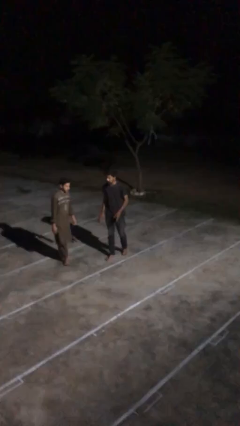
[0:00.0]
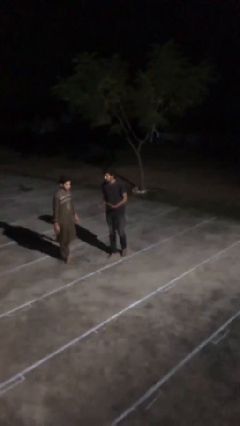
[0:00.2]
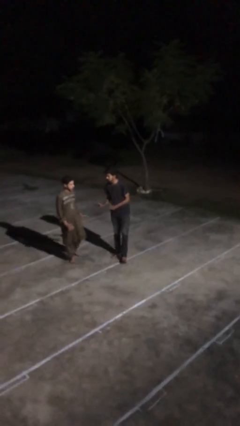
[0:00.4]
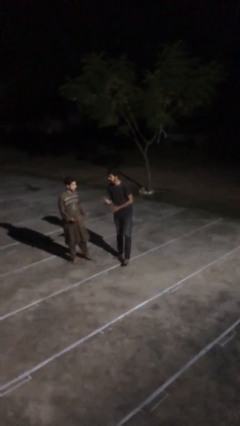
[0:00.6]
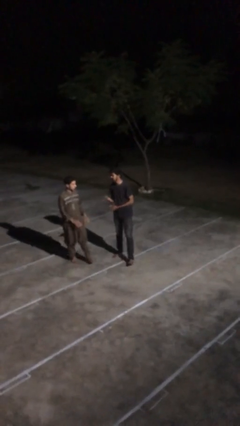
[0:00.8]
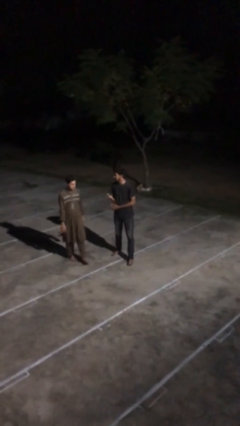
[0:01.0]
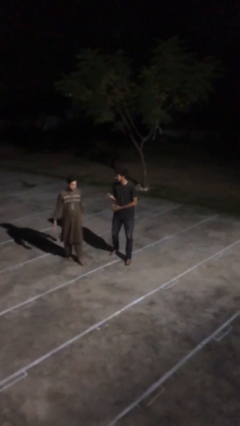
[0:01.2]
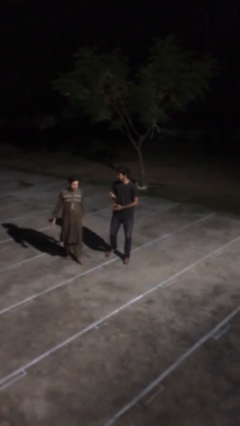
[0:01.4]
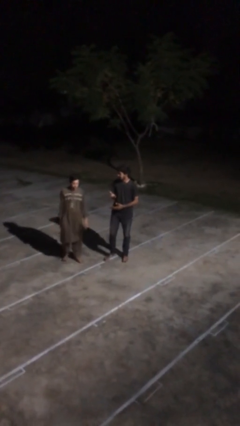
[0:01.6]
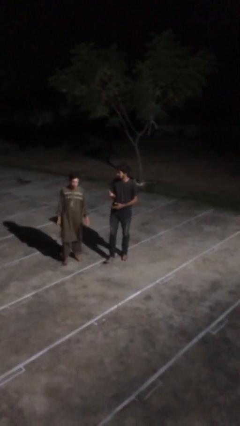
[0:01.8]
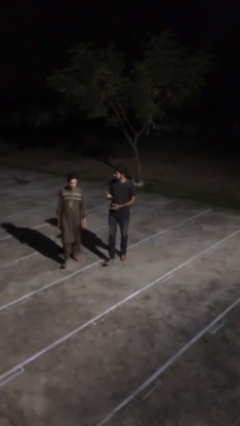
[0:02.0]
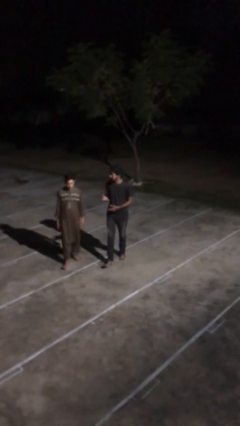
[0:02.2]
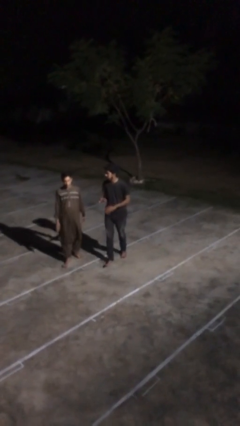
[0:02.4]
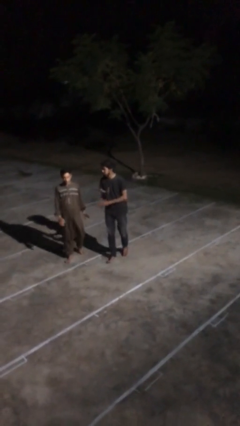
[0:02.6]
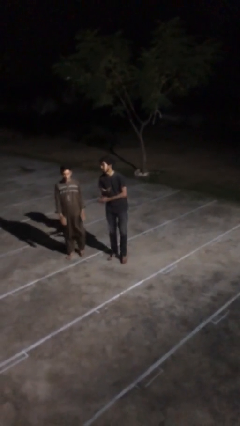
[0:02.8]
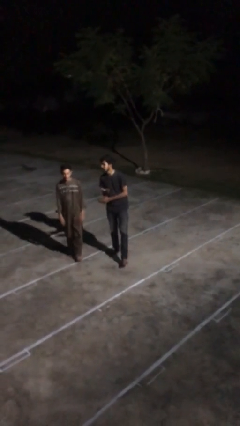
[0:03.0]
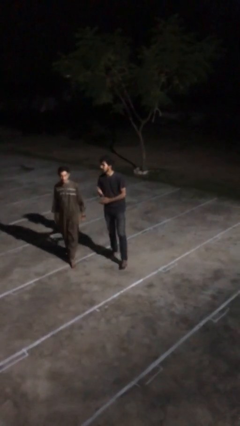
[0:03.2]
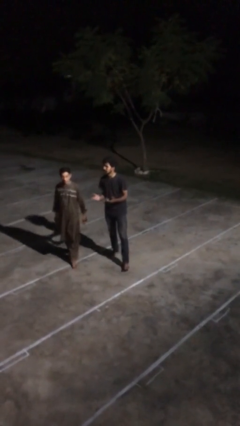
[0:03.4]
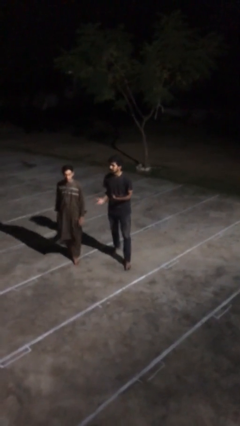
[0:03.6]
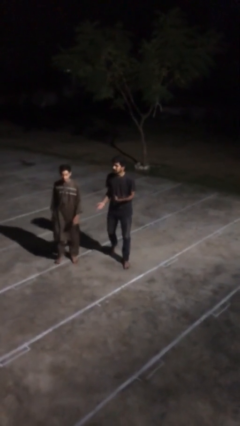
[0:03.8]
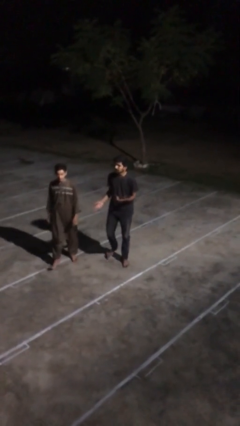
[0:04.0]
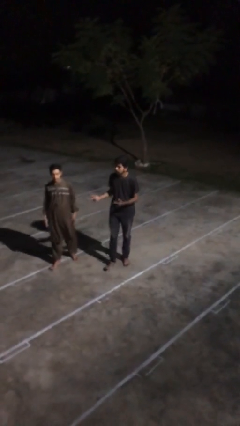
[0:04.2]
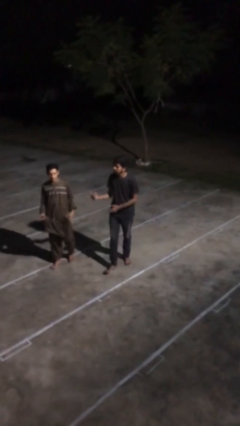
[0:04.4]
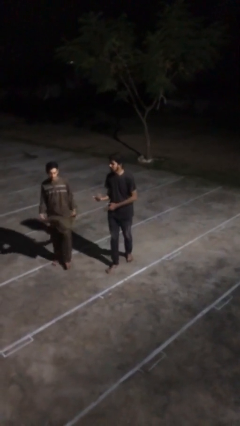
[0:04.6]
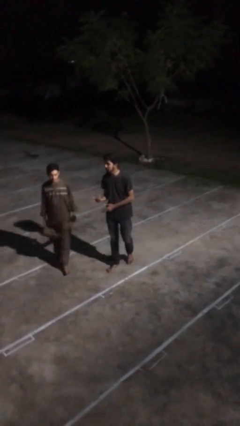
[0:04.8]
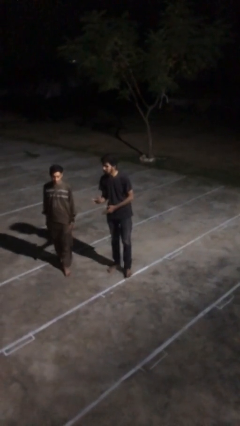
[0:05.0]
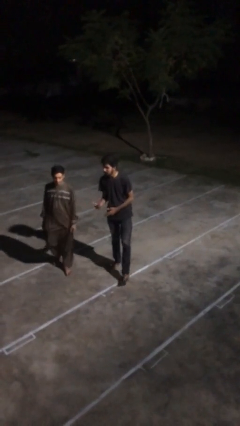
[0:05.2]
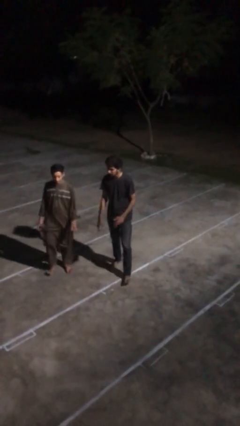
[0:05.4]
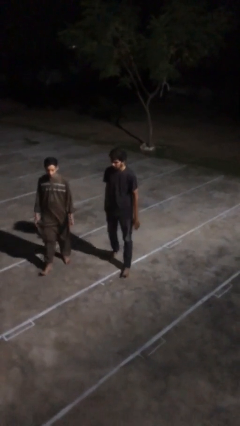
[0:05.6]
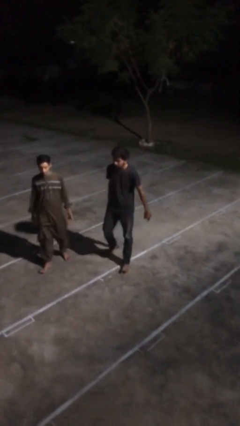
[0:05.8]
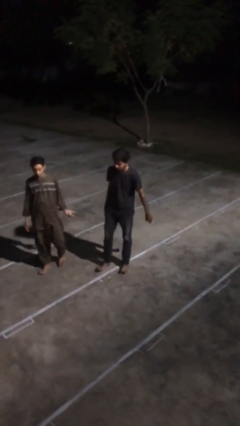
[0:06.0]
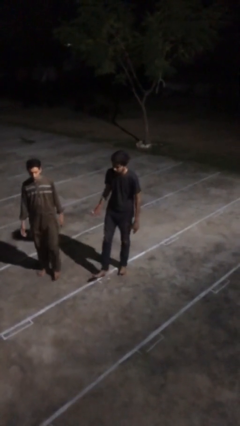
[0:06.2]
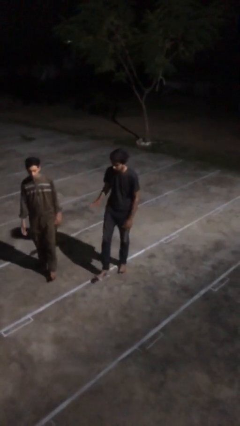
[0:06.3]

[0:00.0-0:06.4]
person talks to person

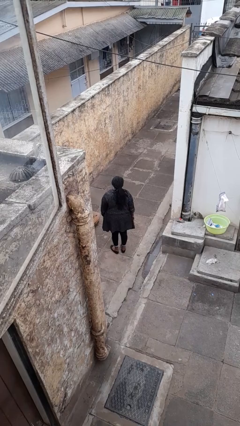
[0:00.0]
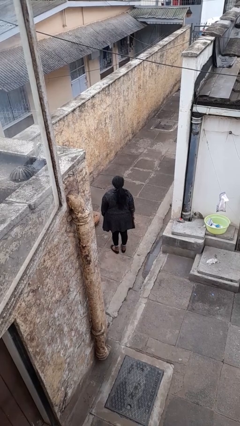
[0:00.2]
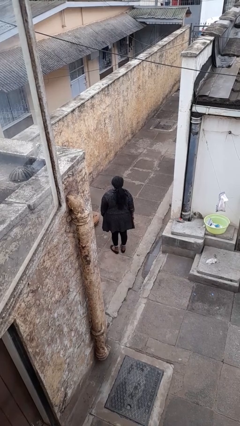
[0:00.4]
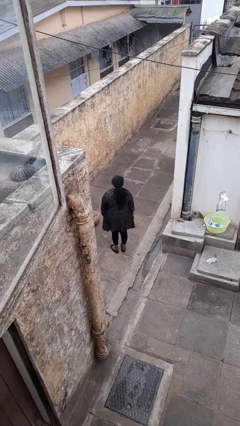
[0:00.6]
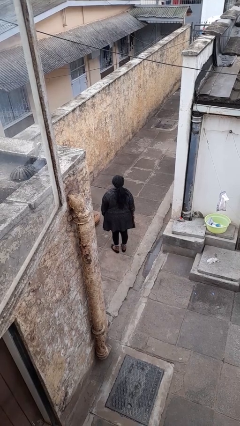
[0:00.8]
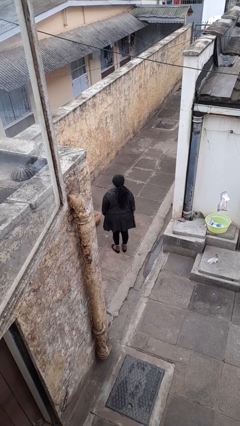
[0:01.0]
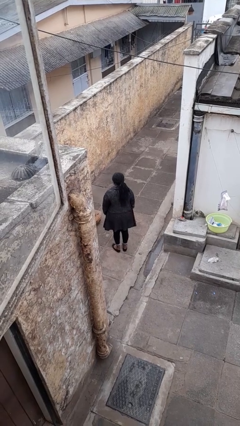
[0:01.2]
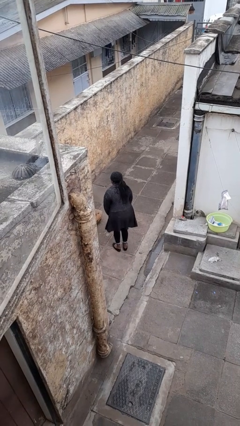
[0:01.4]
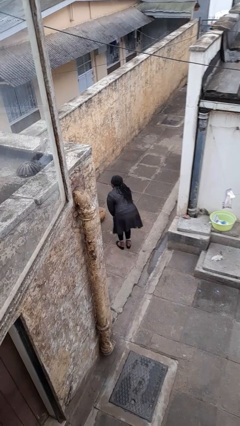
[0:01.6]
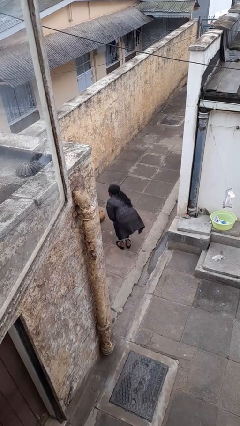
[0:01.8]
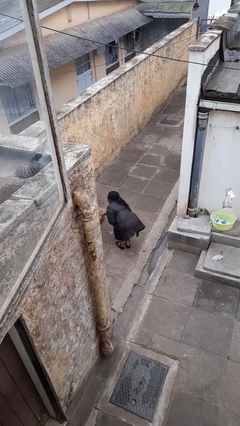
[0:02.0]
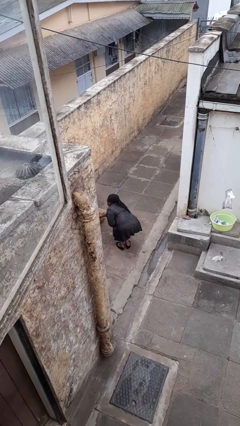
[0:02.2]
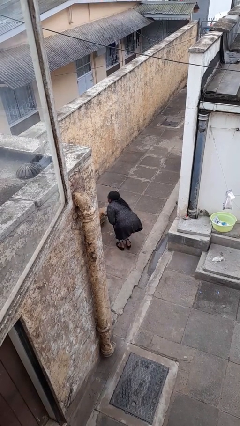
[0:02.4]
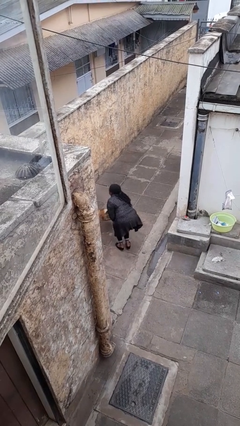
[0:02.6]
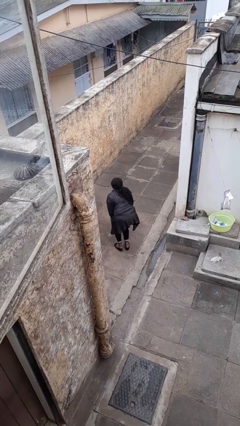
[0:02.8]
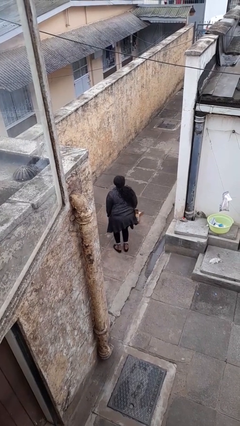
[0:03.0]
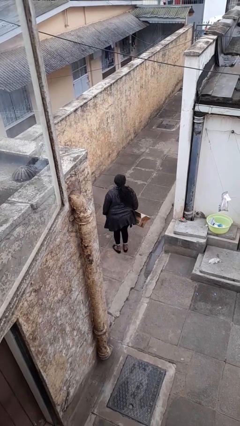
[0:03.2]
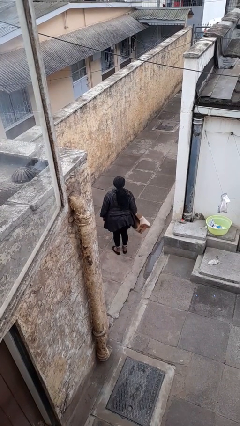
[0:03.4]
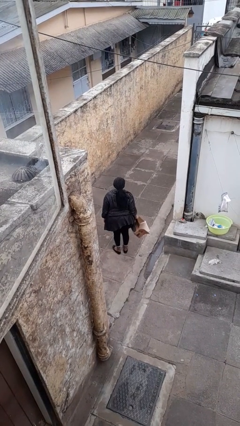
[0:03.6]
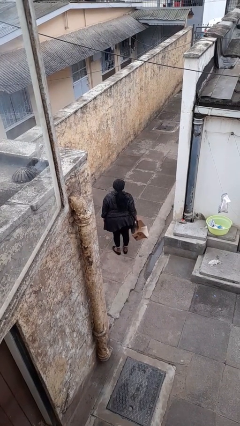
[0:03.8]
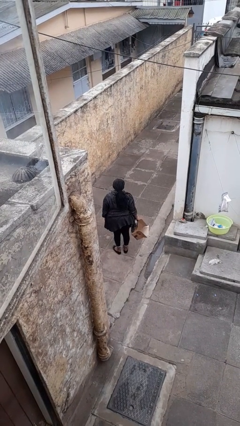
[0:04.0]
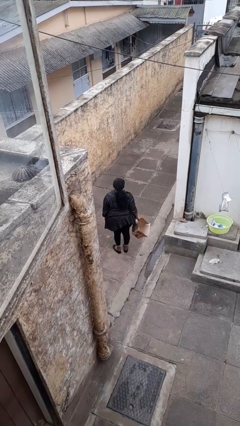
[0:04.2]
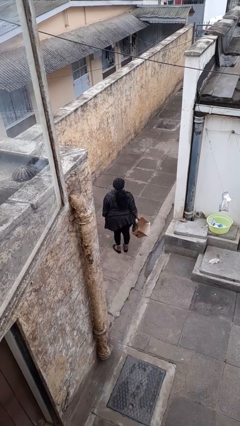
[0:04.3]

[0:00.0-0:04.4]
person picks up object from floor

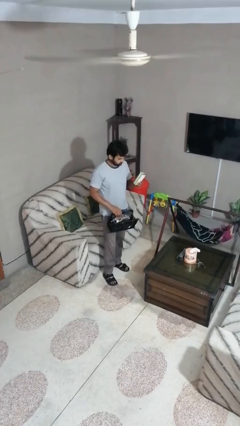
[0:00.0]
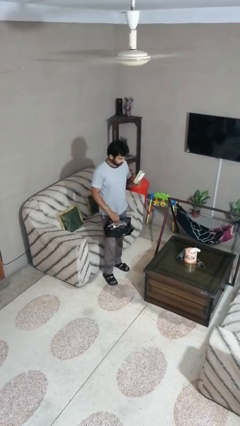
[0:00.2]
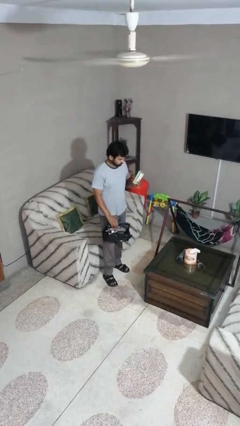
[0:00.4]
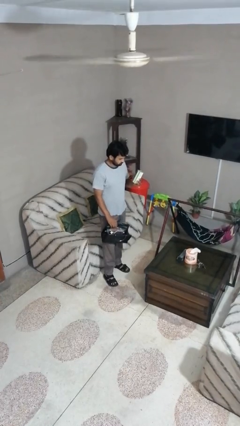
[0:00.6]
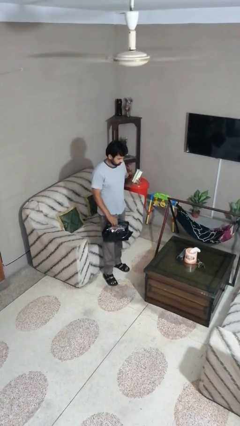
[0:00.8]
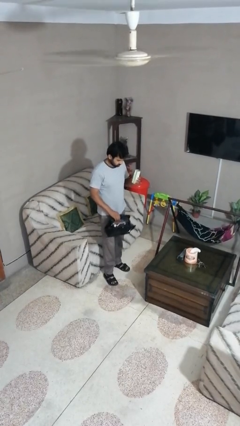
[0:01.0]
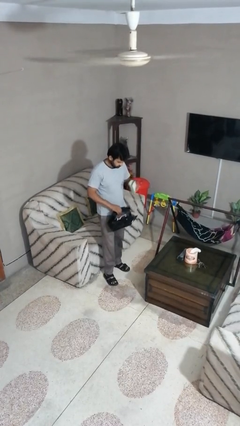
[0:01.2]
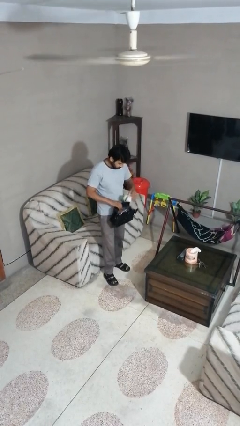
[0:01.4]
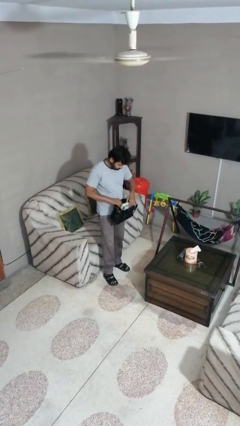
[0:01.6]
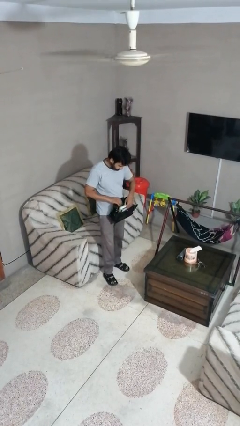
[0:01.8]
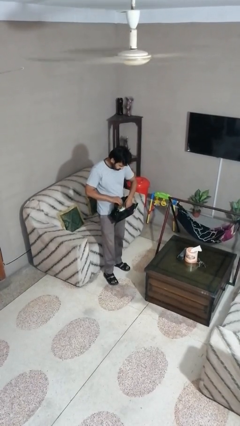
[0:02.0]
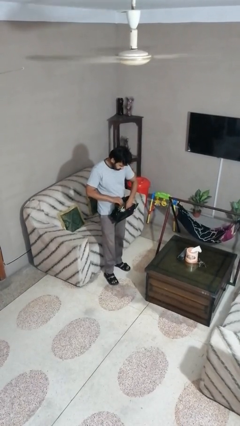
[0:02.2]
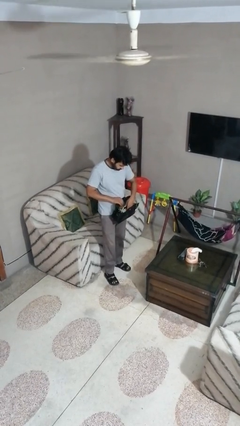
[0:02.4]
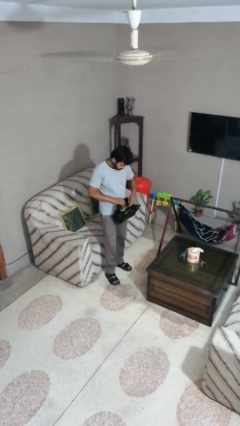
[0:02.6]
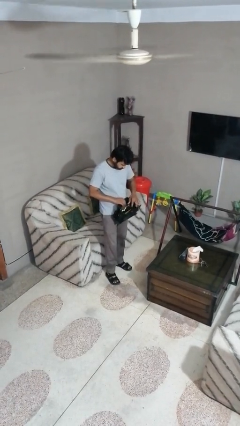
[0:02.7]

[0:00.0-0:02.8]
person puts object into purse

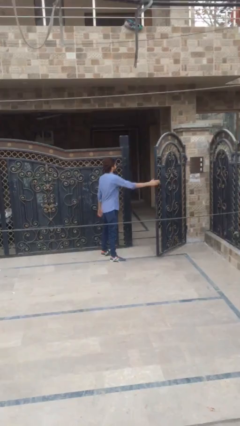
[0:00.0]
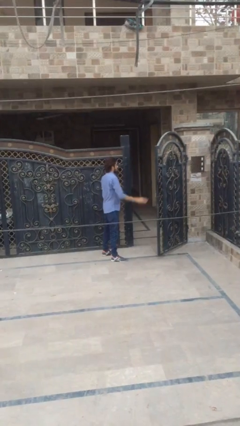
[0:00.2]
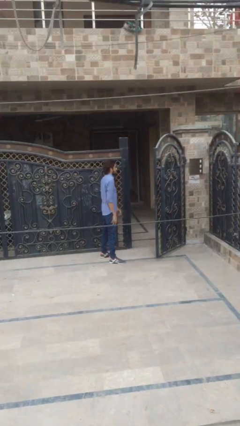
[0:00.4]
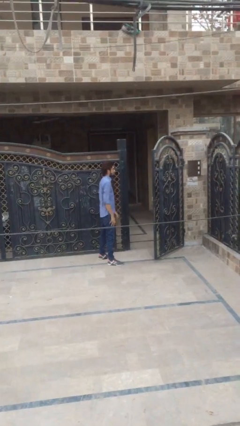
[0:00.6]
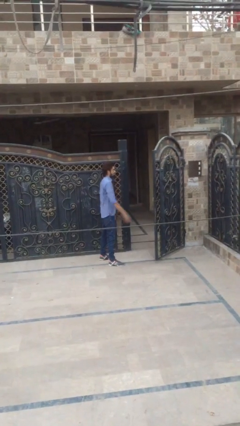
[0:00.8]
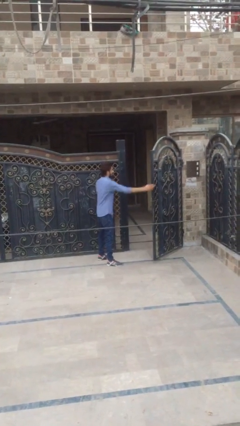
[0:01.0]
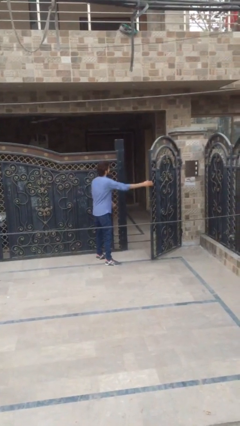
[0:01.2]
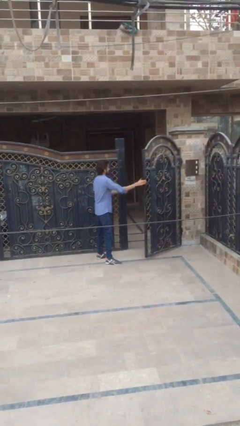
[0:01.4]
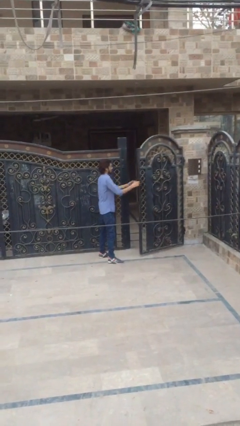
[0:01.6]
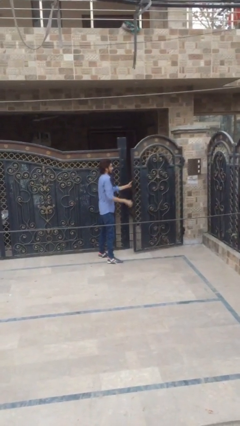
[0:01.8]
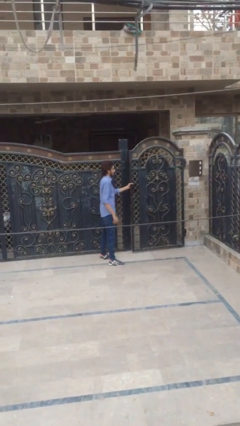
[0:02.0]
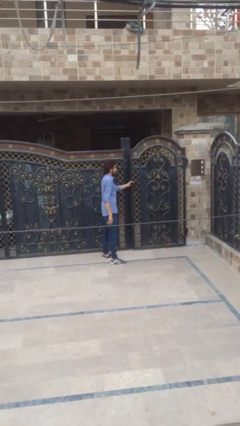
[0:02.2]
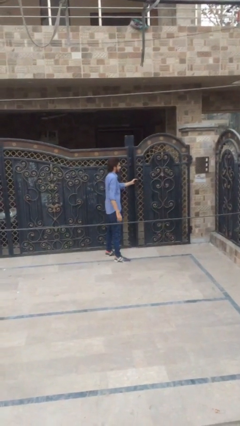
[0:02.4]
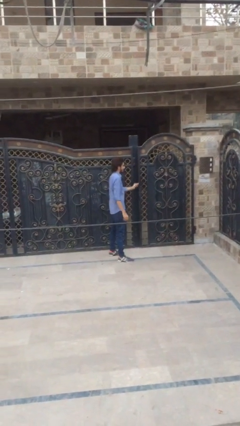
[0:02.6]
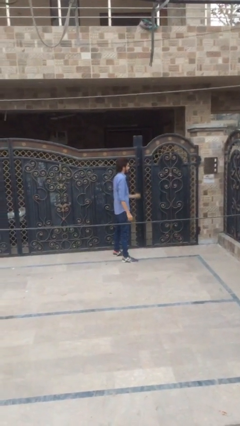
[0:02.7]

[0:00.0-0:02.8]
person closes facility door

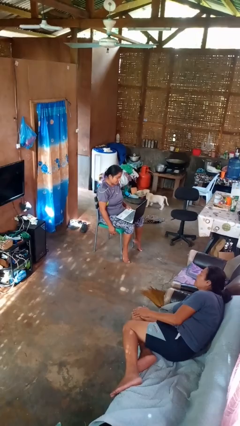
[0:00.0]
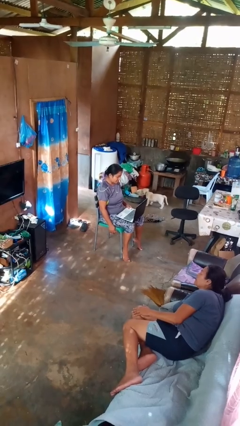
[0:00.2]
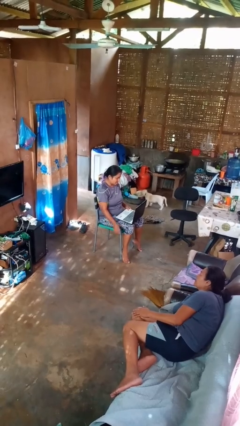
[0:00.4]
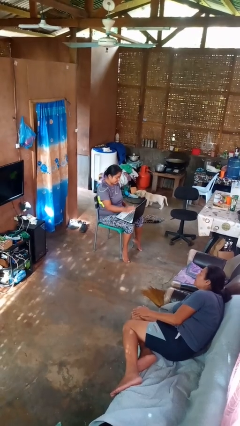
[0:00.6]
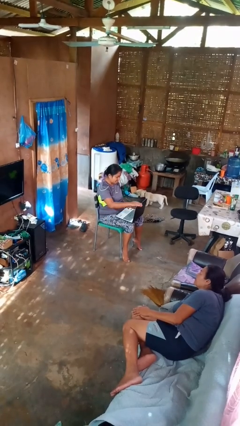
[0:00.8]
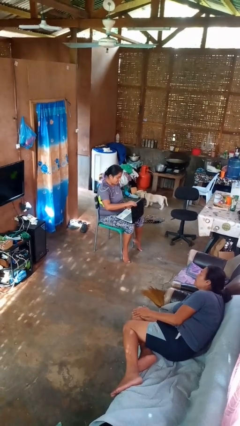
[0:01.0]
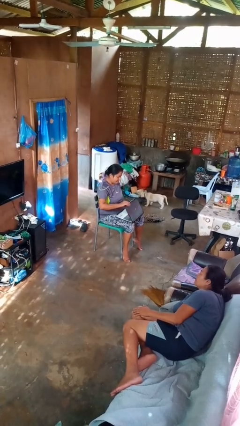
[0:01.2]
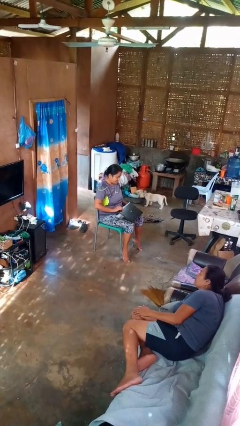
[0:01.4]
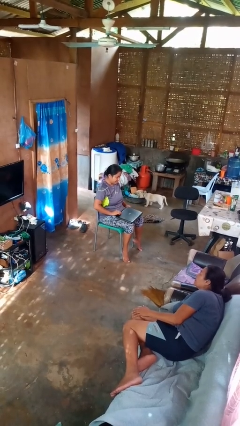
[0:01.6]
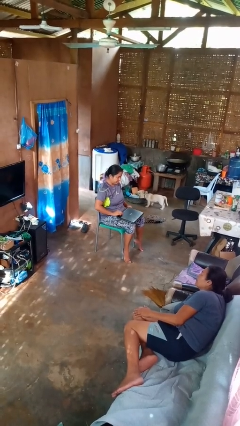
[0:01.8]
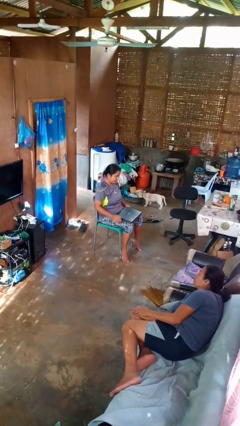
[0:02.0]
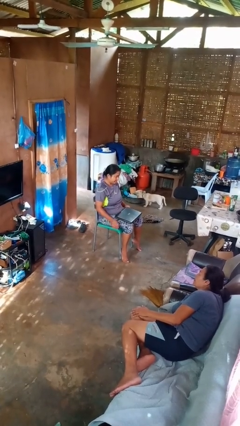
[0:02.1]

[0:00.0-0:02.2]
person closes laptop
